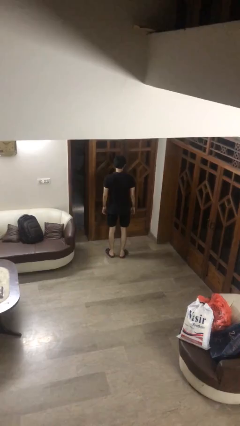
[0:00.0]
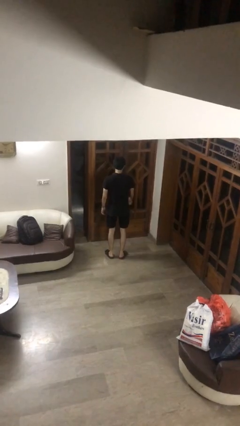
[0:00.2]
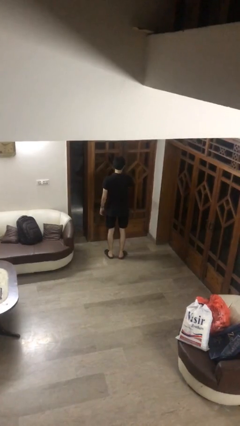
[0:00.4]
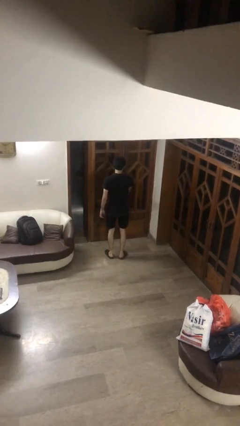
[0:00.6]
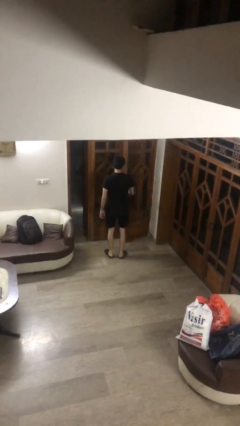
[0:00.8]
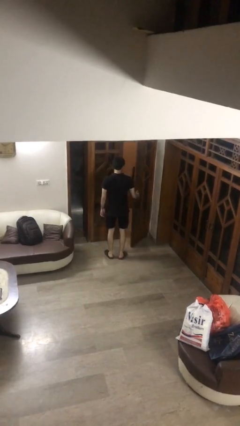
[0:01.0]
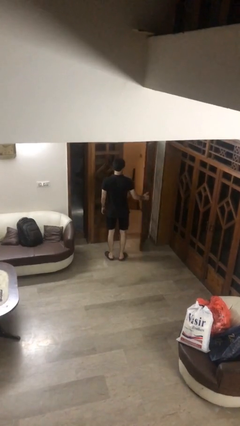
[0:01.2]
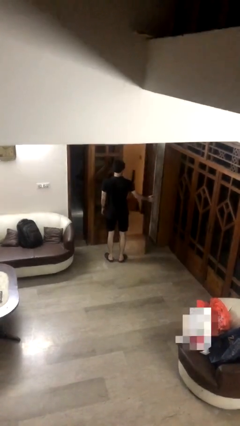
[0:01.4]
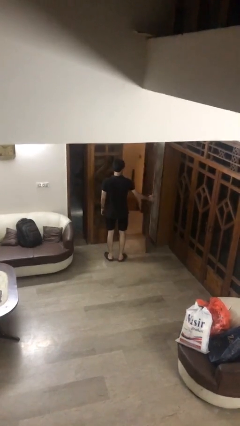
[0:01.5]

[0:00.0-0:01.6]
person opens facility door

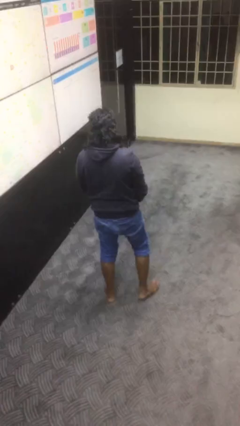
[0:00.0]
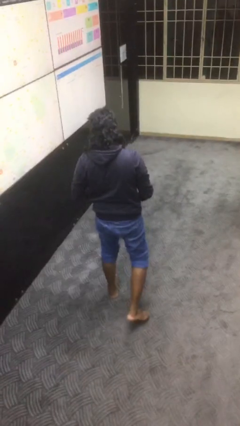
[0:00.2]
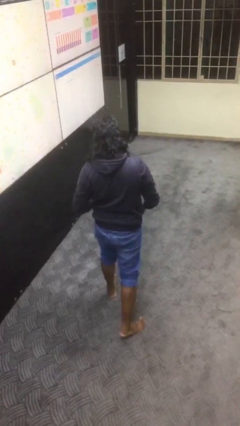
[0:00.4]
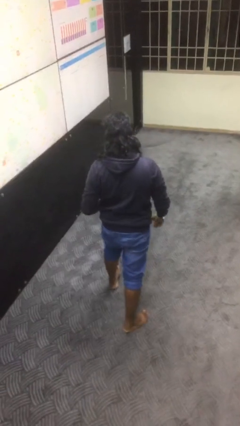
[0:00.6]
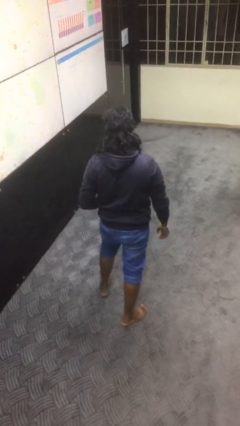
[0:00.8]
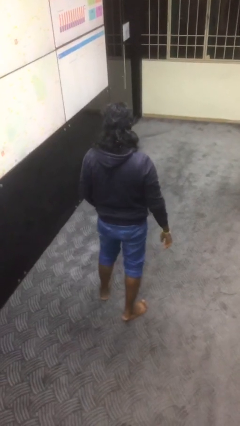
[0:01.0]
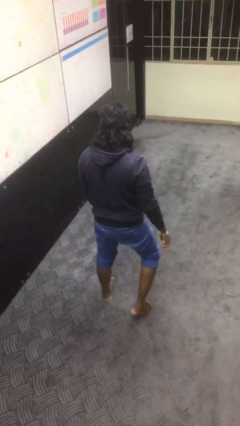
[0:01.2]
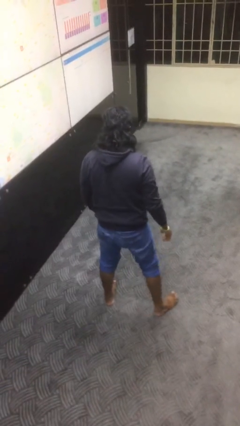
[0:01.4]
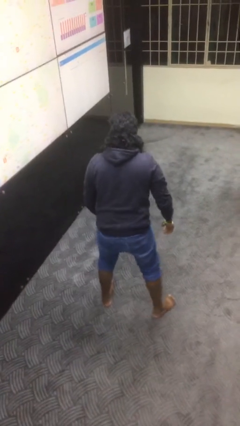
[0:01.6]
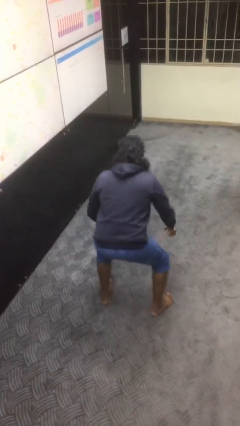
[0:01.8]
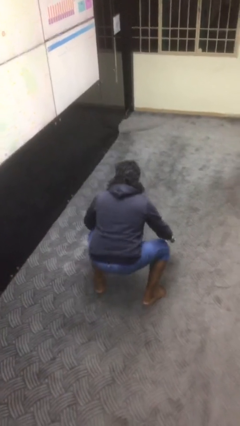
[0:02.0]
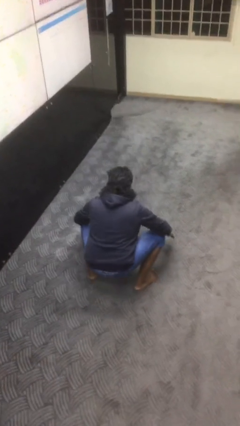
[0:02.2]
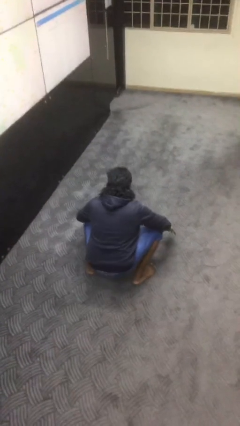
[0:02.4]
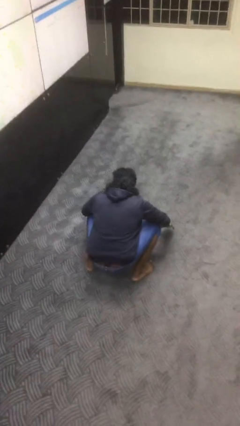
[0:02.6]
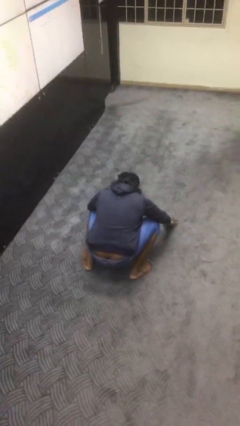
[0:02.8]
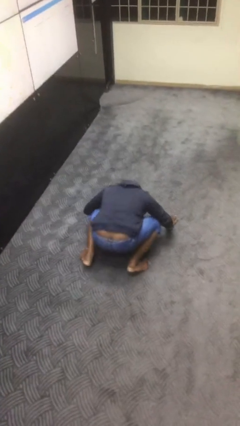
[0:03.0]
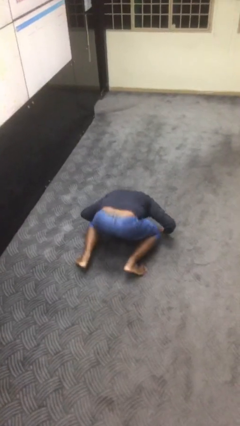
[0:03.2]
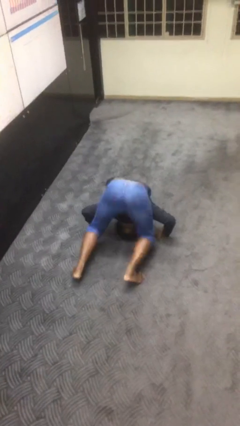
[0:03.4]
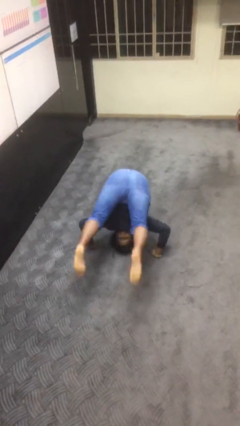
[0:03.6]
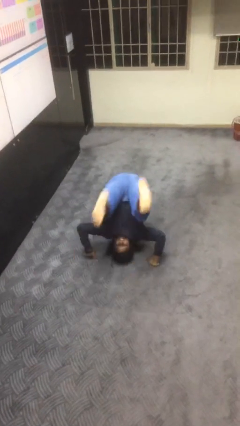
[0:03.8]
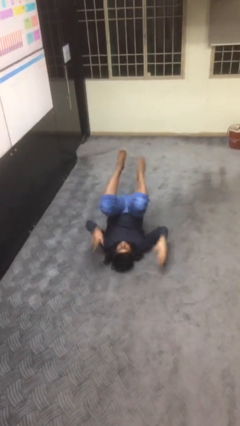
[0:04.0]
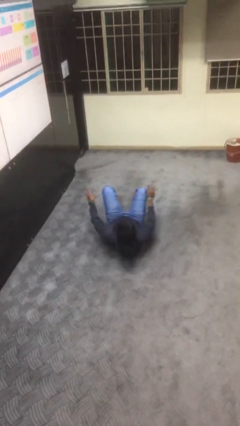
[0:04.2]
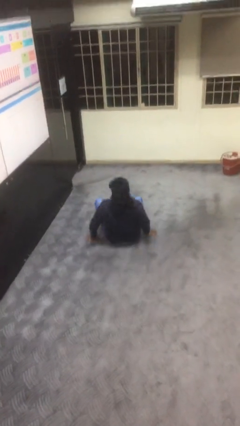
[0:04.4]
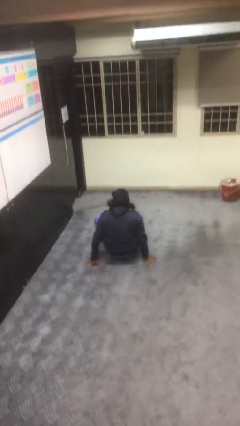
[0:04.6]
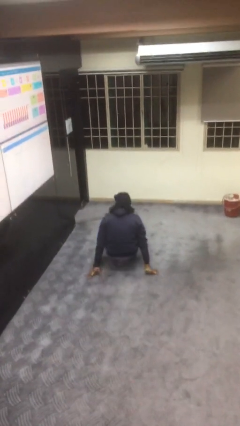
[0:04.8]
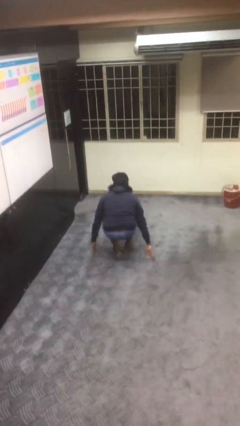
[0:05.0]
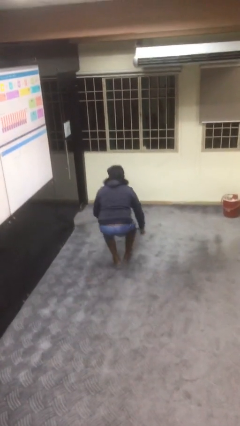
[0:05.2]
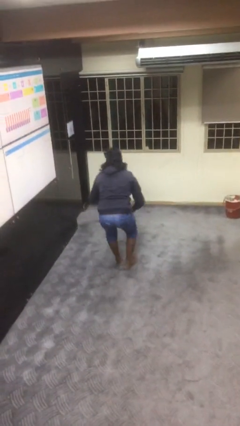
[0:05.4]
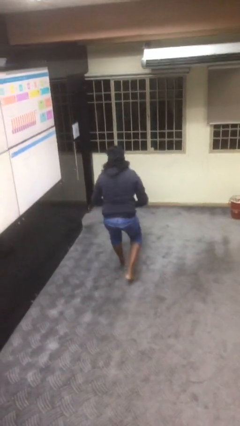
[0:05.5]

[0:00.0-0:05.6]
person somersaults

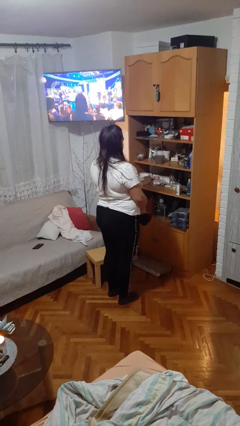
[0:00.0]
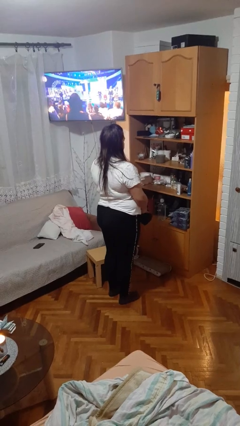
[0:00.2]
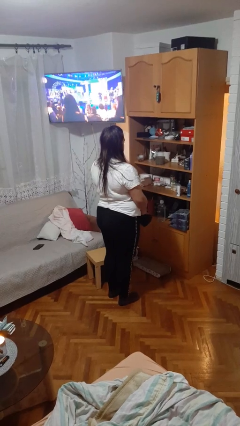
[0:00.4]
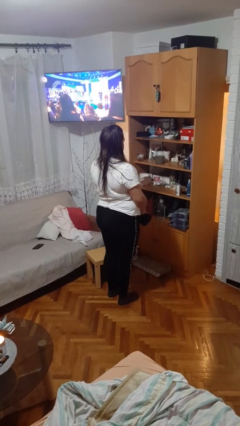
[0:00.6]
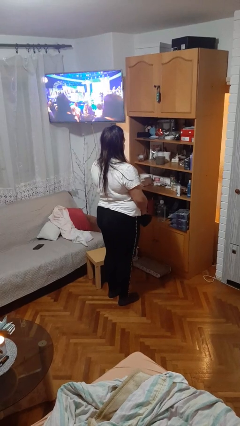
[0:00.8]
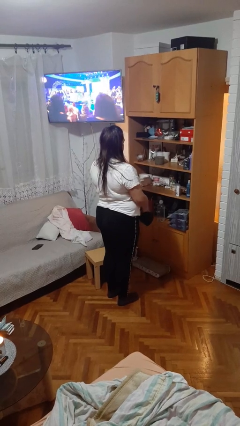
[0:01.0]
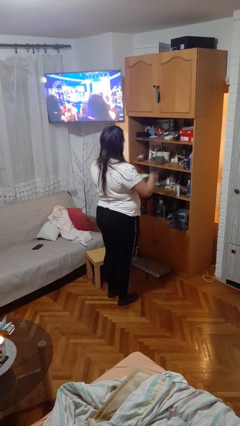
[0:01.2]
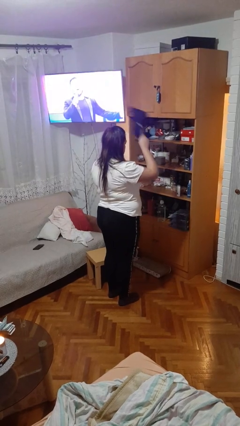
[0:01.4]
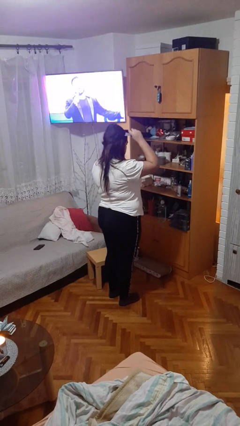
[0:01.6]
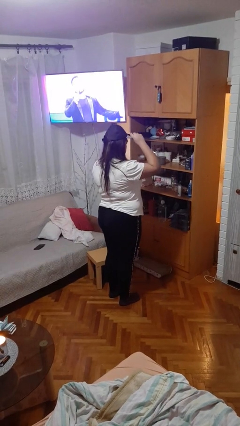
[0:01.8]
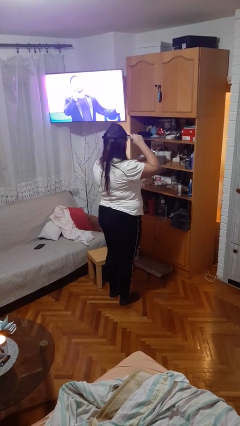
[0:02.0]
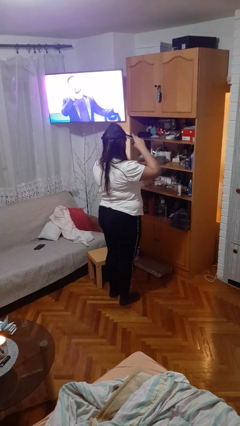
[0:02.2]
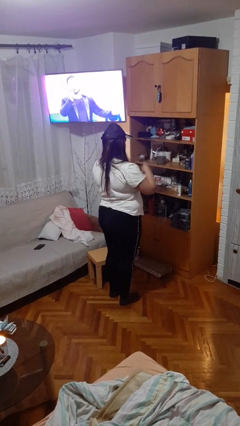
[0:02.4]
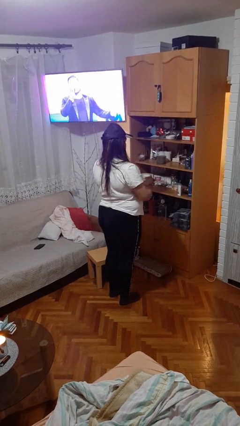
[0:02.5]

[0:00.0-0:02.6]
person puts on hat

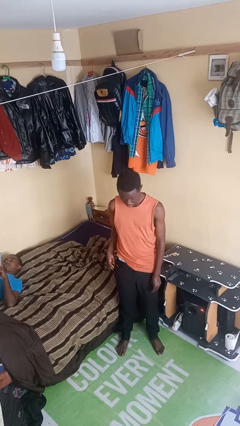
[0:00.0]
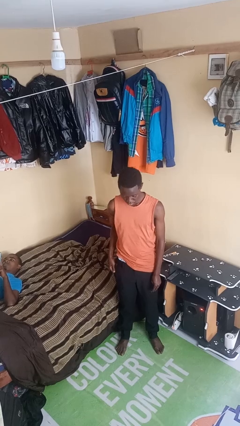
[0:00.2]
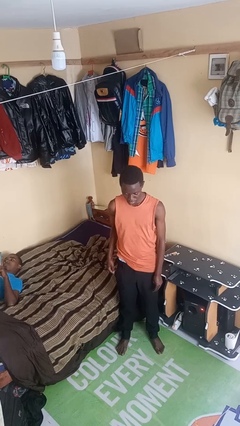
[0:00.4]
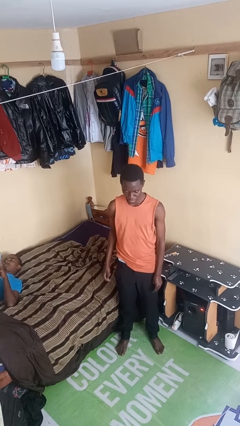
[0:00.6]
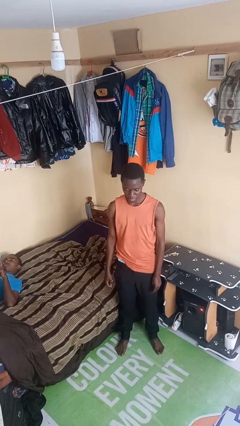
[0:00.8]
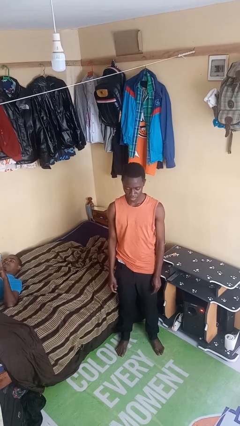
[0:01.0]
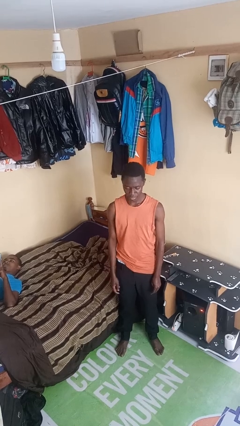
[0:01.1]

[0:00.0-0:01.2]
person puts phone into pocket

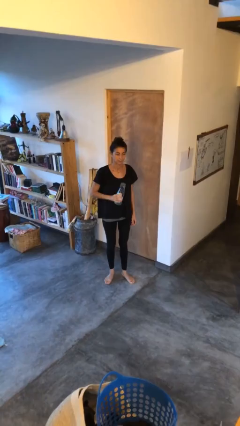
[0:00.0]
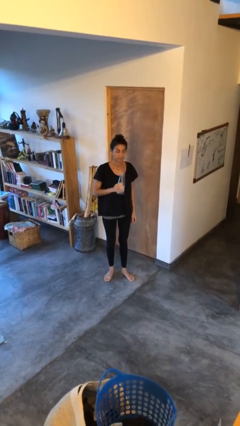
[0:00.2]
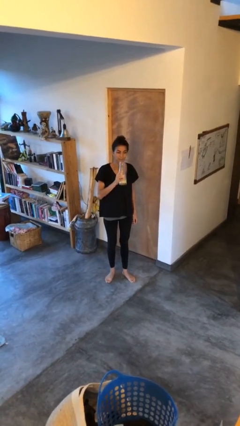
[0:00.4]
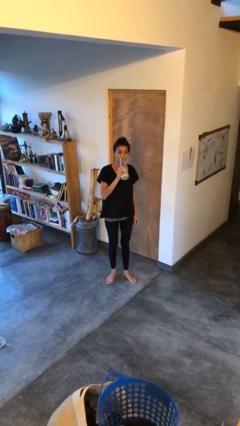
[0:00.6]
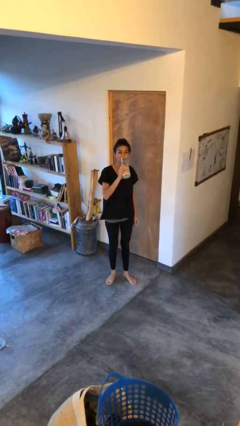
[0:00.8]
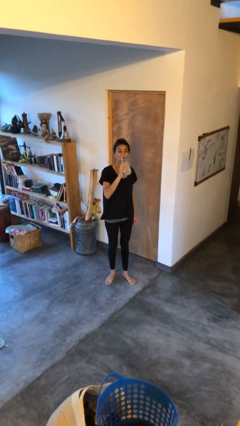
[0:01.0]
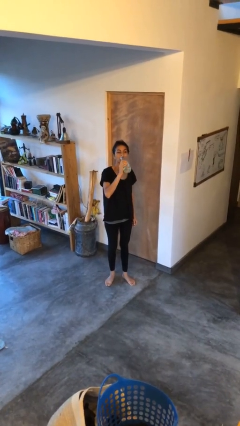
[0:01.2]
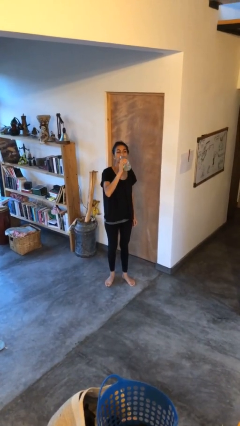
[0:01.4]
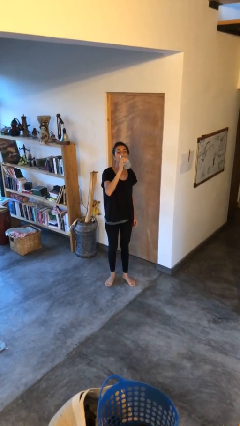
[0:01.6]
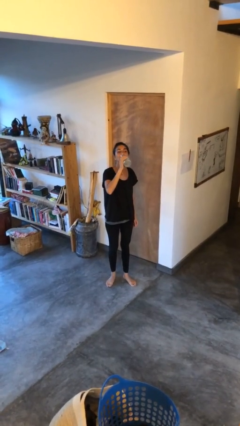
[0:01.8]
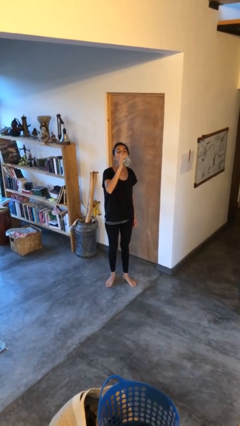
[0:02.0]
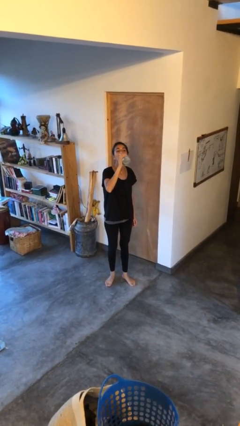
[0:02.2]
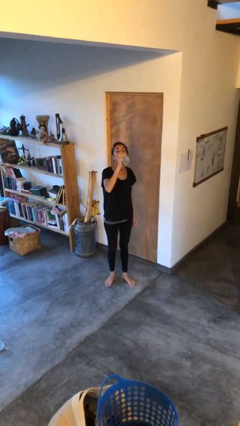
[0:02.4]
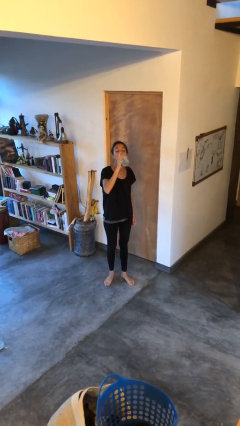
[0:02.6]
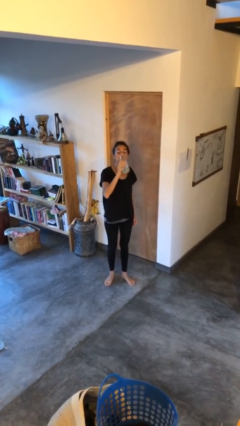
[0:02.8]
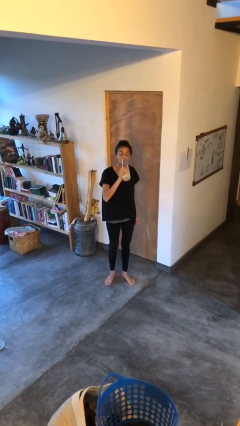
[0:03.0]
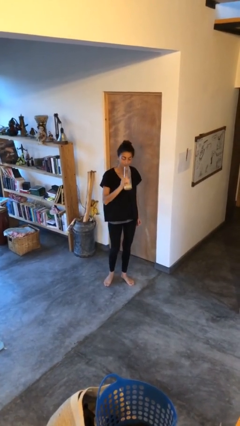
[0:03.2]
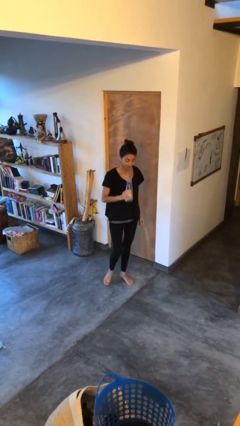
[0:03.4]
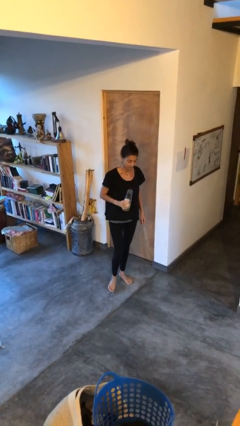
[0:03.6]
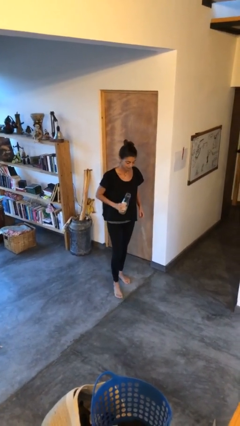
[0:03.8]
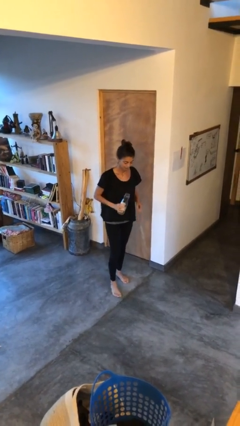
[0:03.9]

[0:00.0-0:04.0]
person drinks from bottle

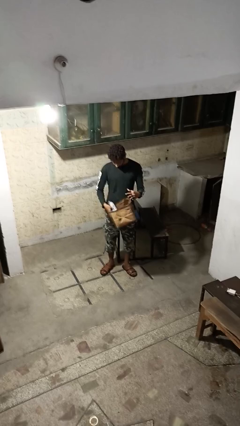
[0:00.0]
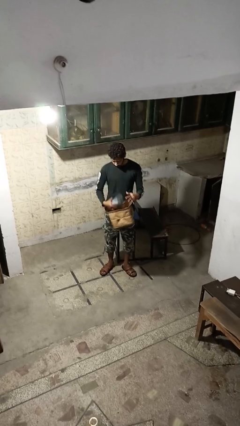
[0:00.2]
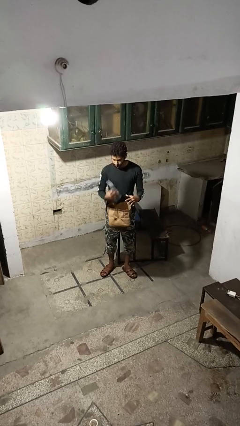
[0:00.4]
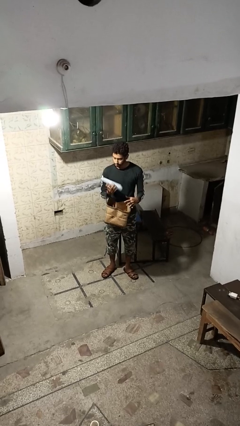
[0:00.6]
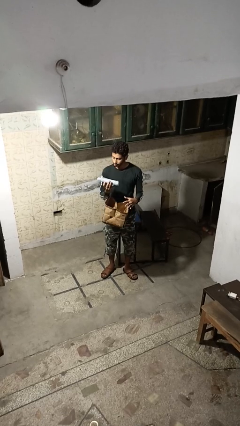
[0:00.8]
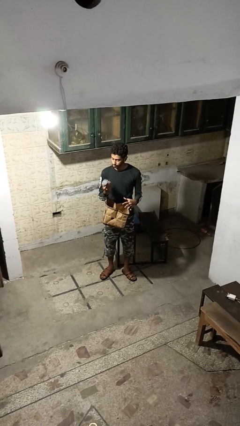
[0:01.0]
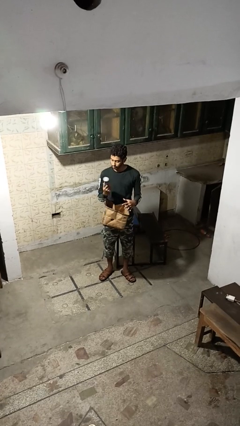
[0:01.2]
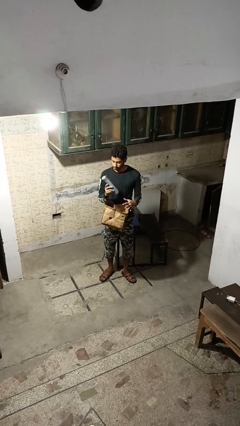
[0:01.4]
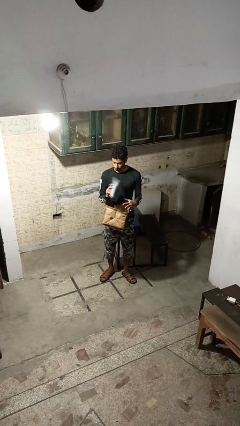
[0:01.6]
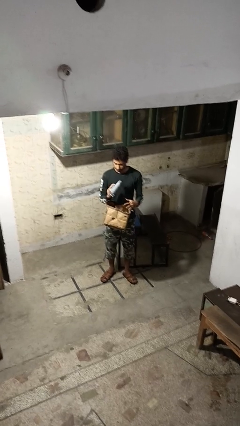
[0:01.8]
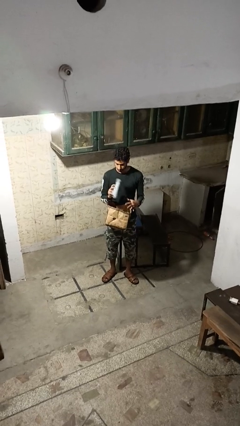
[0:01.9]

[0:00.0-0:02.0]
person takes object from purse

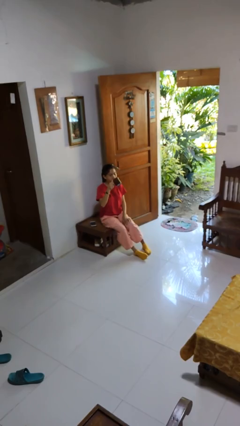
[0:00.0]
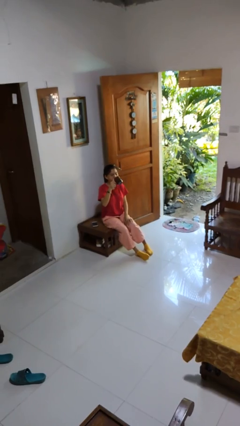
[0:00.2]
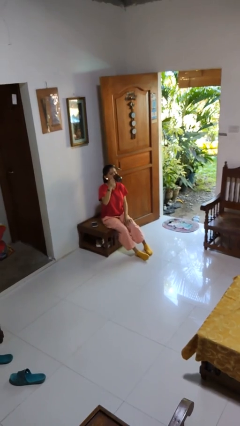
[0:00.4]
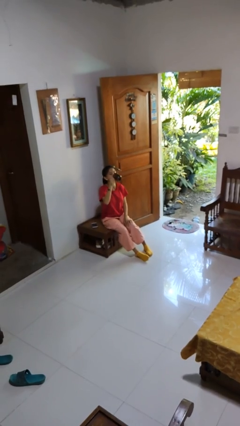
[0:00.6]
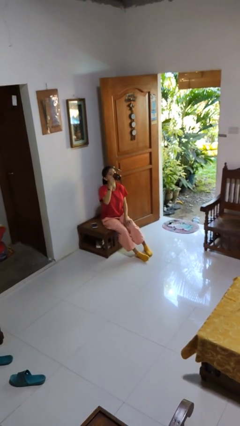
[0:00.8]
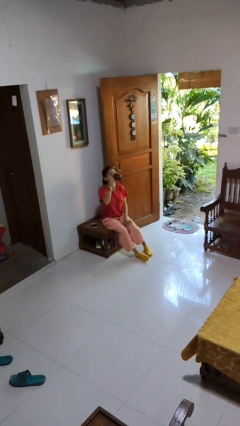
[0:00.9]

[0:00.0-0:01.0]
person drinks from mug
